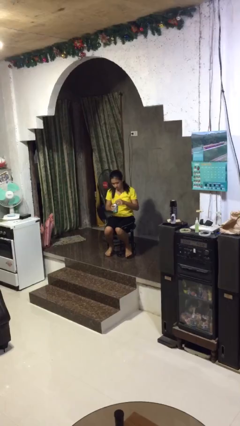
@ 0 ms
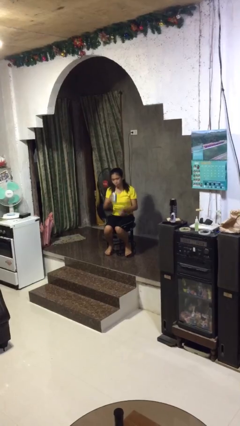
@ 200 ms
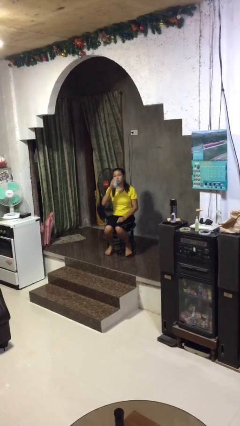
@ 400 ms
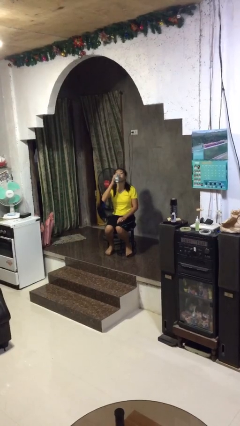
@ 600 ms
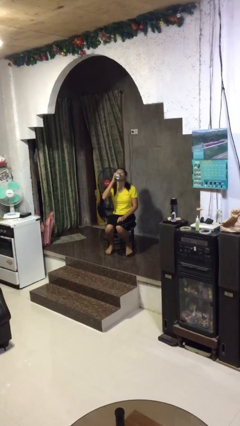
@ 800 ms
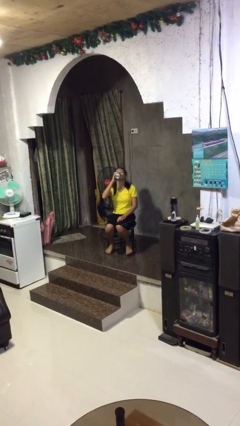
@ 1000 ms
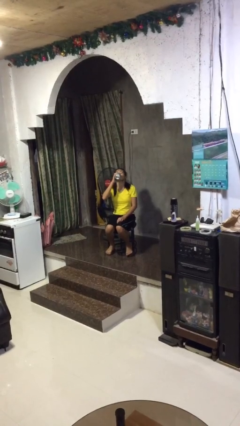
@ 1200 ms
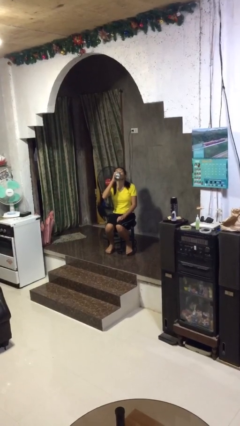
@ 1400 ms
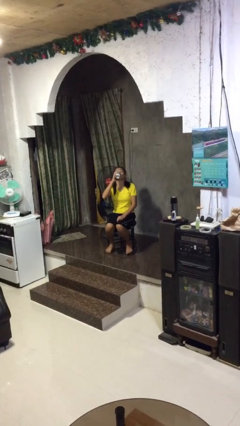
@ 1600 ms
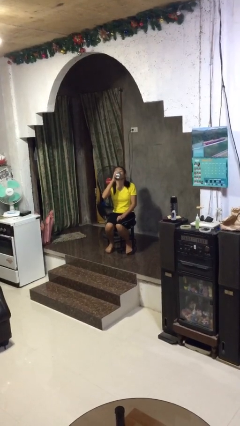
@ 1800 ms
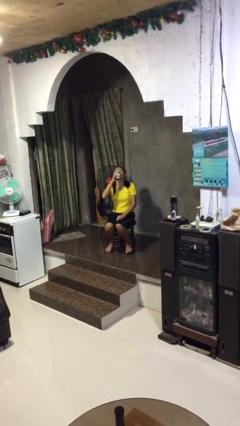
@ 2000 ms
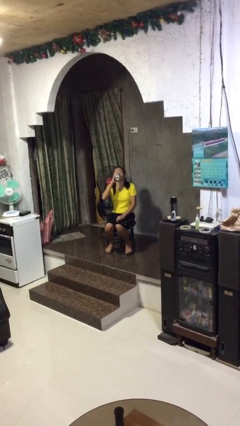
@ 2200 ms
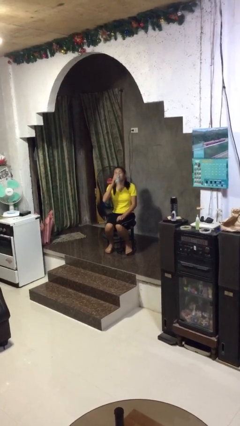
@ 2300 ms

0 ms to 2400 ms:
person drinks from beverage can

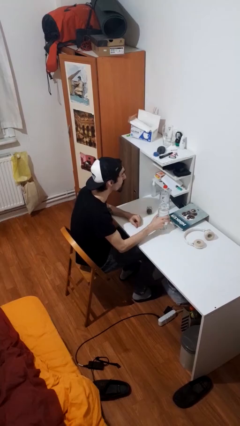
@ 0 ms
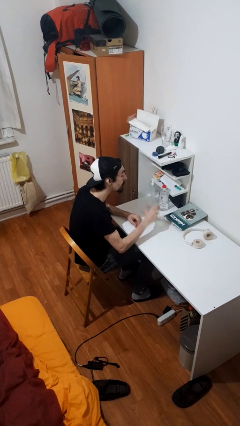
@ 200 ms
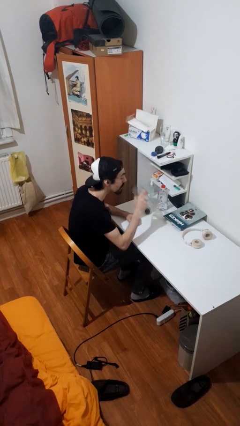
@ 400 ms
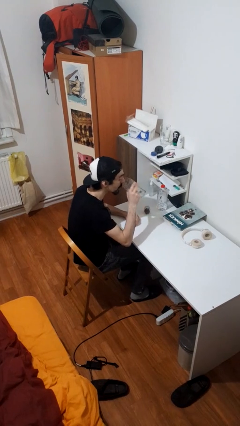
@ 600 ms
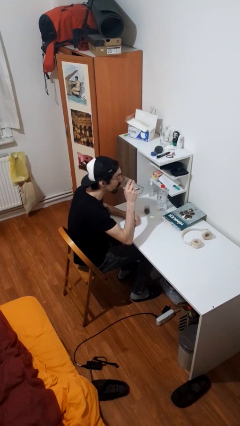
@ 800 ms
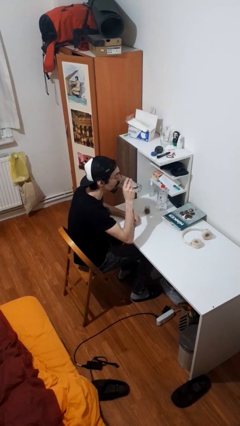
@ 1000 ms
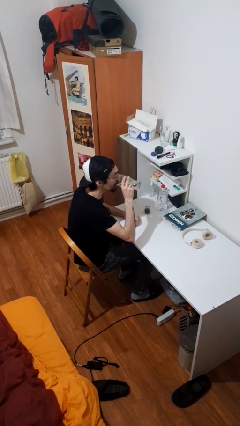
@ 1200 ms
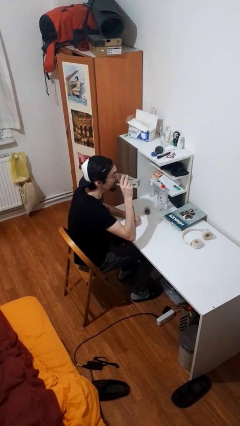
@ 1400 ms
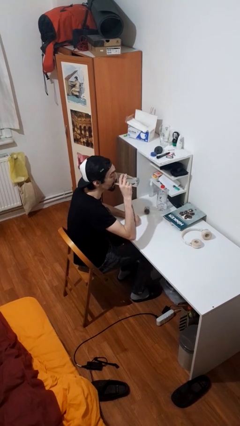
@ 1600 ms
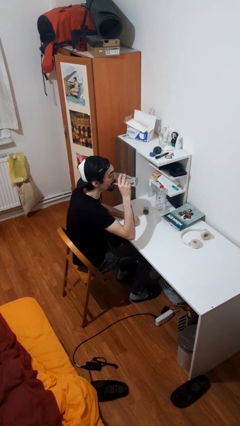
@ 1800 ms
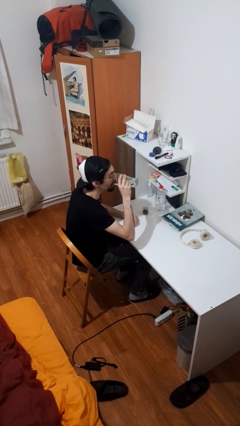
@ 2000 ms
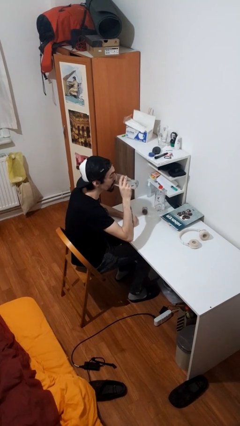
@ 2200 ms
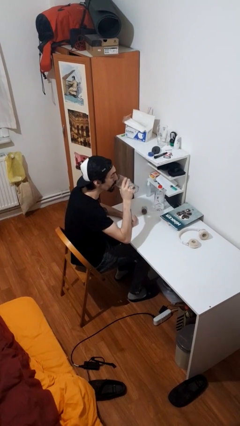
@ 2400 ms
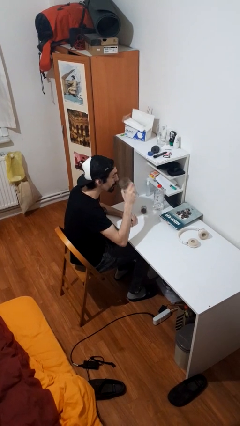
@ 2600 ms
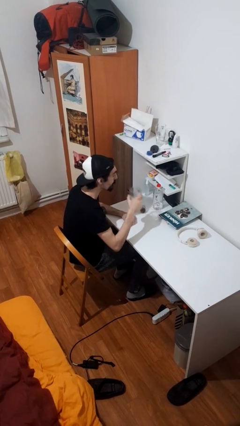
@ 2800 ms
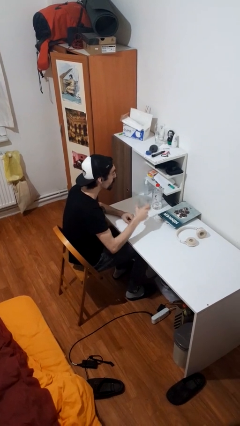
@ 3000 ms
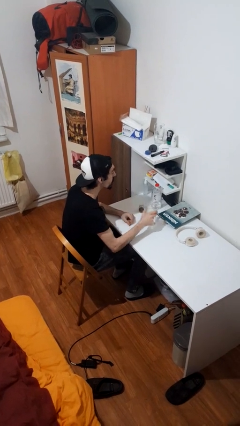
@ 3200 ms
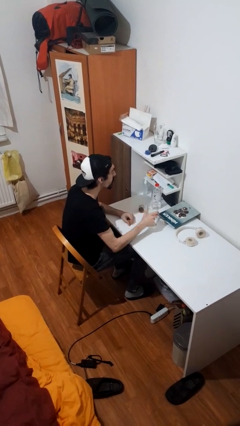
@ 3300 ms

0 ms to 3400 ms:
person drinks from cup

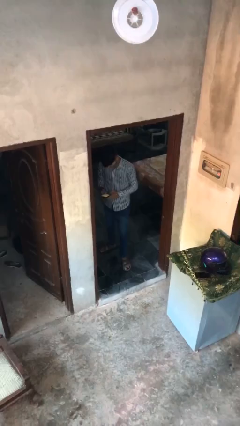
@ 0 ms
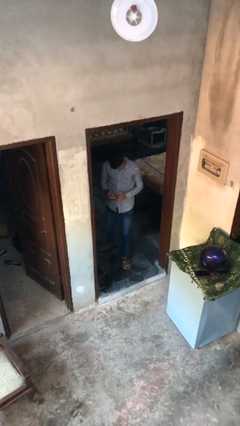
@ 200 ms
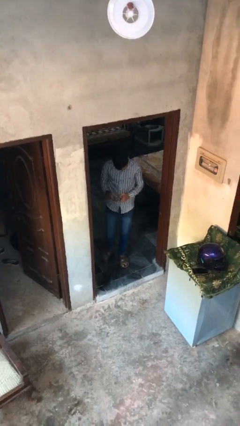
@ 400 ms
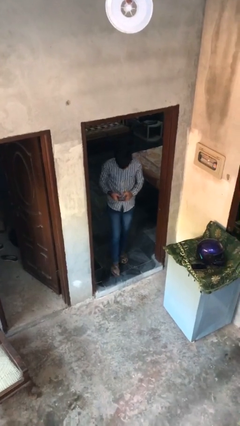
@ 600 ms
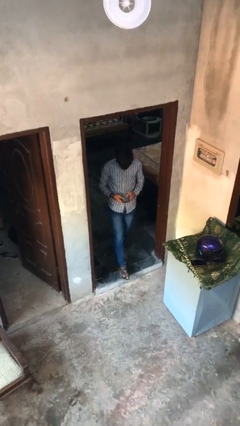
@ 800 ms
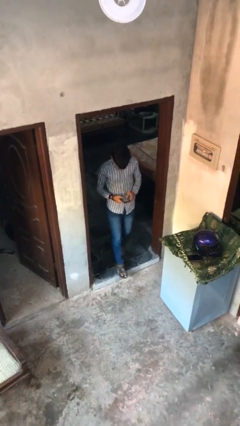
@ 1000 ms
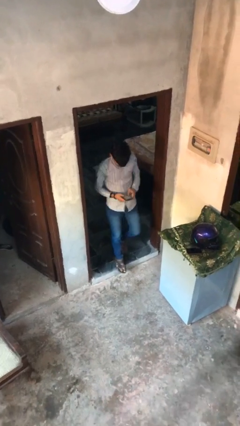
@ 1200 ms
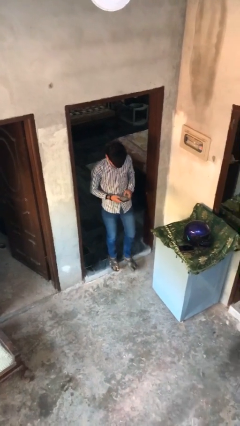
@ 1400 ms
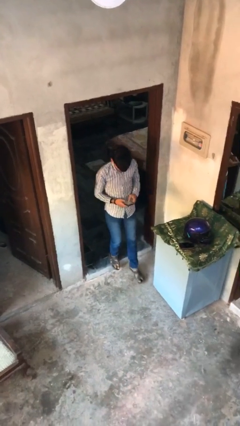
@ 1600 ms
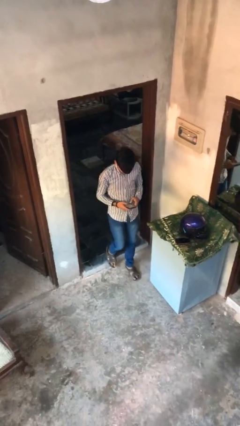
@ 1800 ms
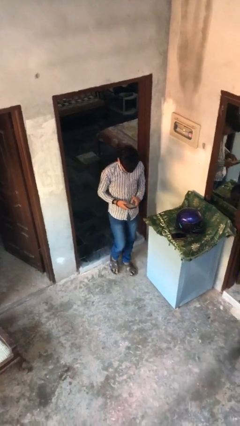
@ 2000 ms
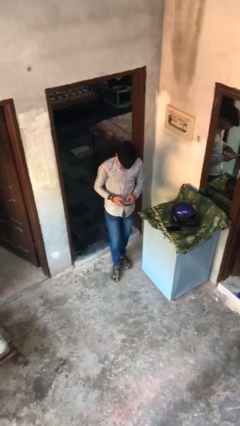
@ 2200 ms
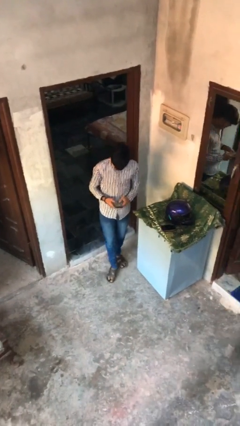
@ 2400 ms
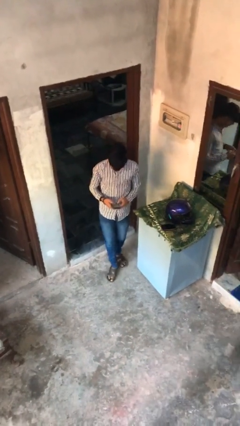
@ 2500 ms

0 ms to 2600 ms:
person exits scene through structure

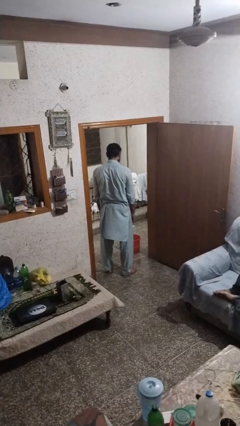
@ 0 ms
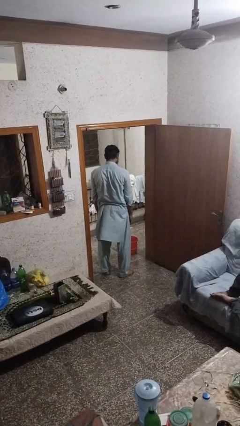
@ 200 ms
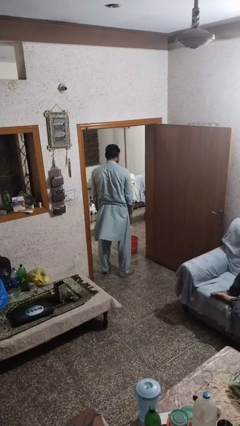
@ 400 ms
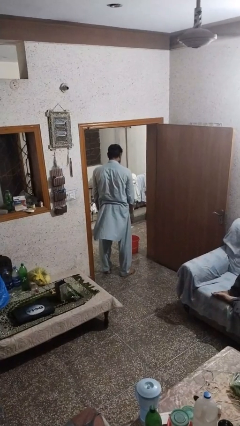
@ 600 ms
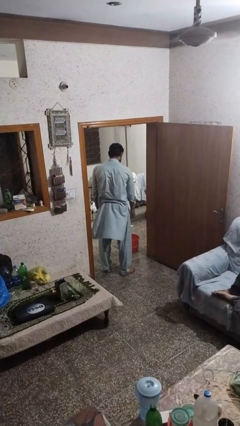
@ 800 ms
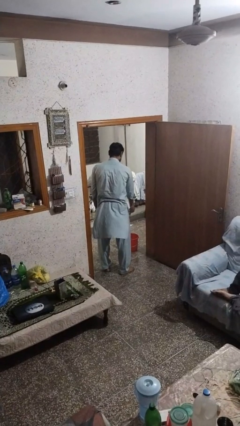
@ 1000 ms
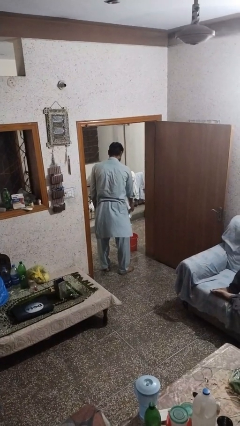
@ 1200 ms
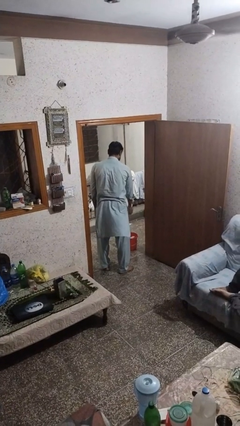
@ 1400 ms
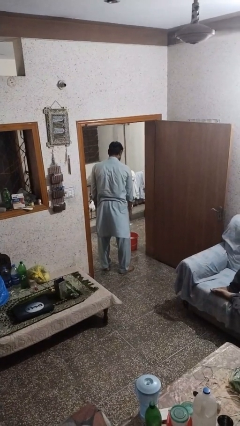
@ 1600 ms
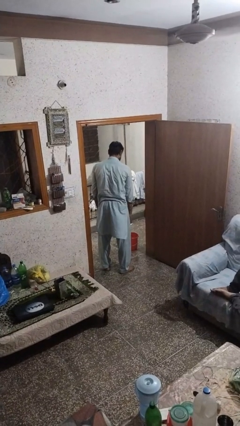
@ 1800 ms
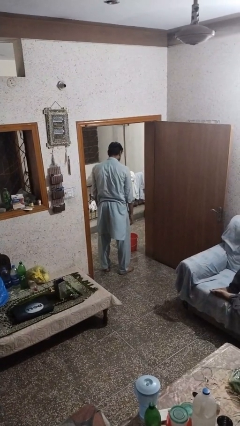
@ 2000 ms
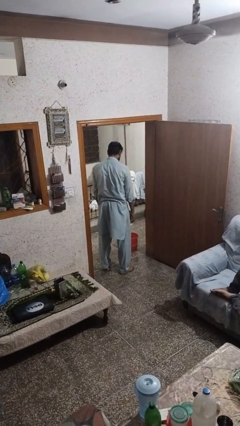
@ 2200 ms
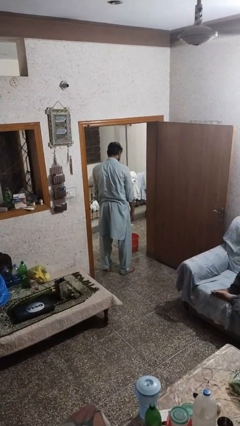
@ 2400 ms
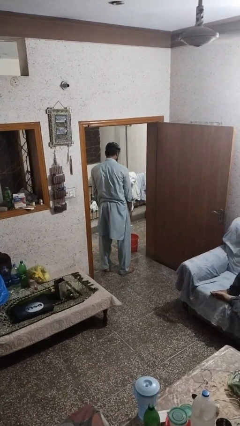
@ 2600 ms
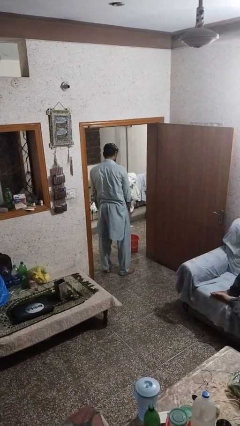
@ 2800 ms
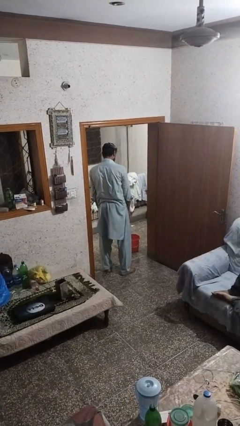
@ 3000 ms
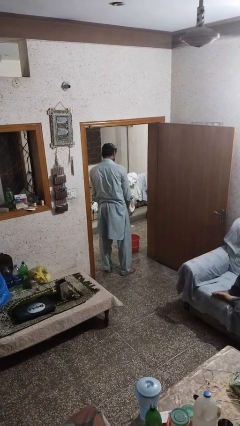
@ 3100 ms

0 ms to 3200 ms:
person discards trash

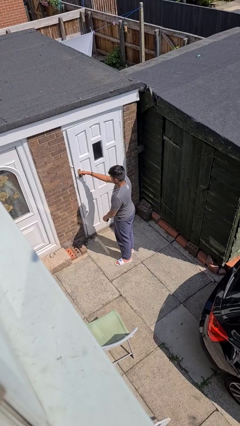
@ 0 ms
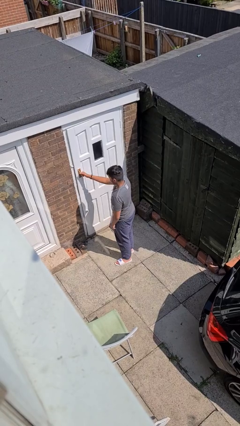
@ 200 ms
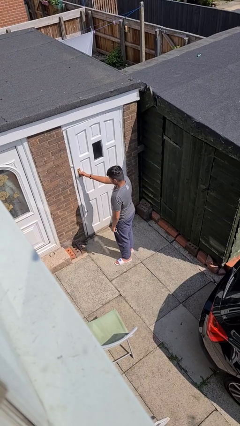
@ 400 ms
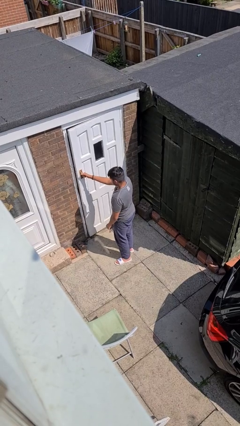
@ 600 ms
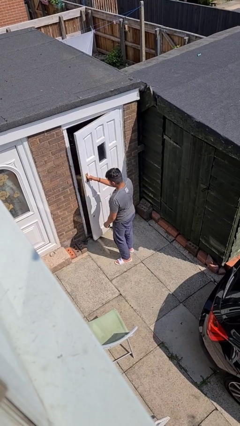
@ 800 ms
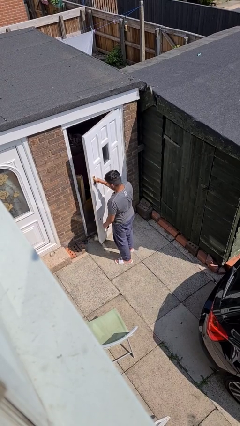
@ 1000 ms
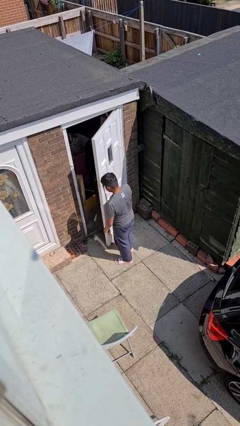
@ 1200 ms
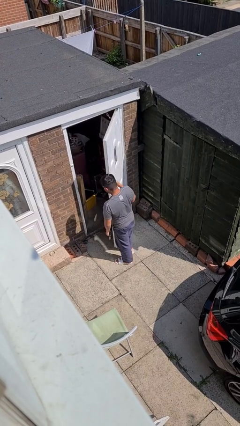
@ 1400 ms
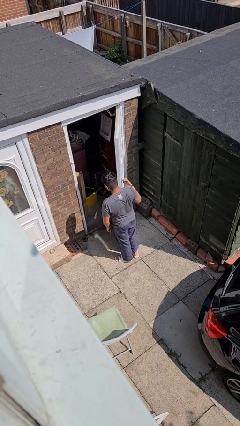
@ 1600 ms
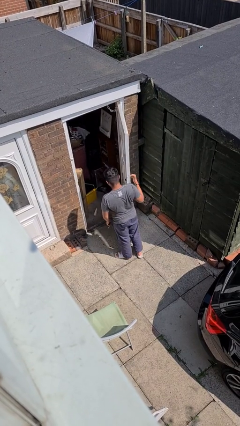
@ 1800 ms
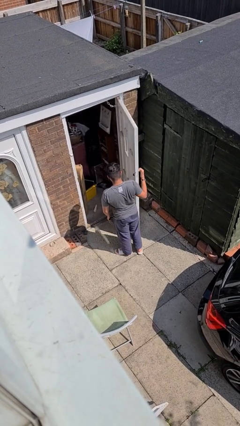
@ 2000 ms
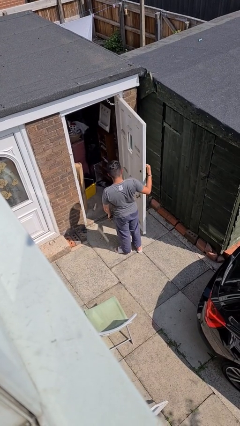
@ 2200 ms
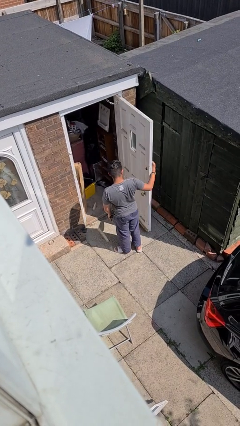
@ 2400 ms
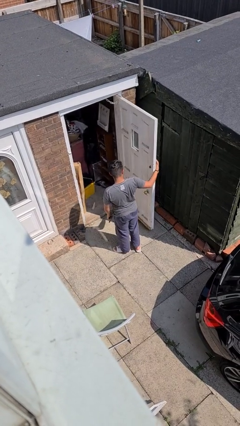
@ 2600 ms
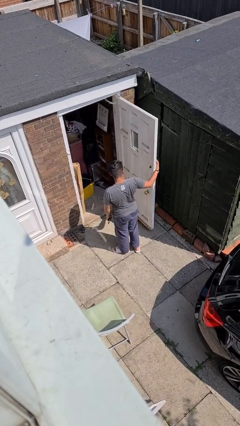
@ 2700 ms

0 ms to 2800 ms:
person opens facility door

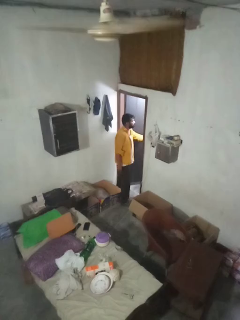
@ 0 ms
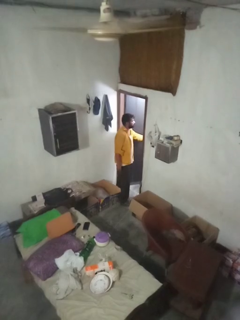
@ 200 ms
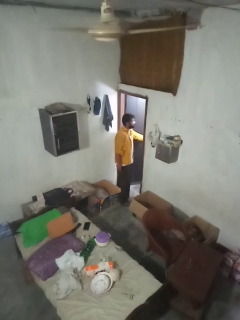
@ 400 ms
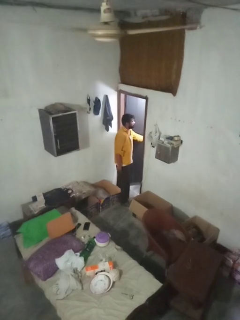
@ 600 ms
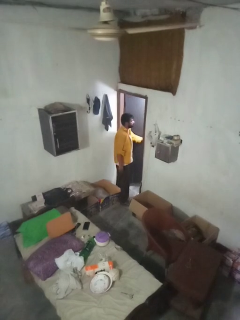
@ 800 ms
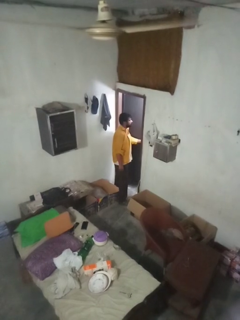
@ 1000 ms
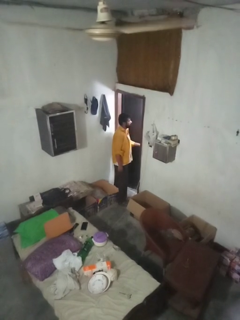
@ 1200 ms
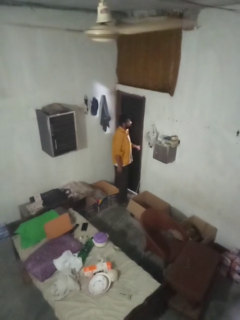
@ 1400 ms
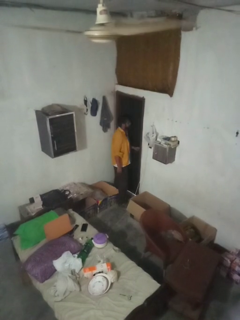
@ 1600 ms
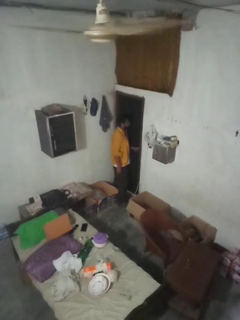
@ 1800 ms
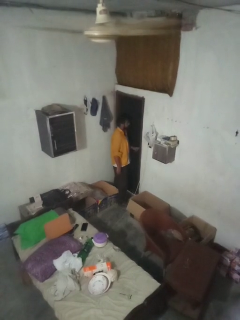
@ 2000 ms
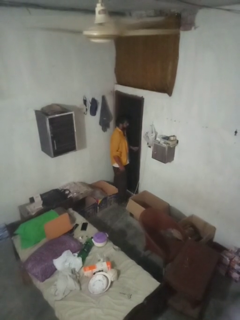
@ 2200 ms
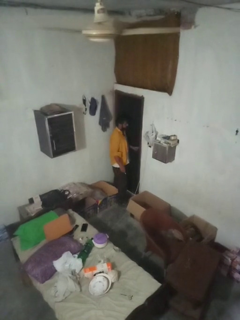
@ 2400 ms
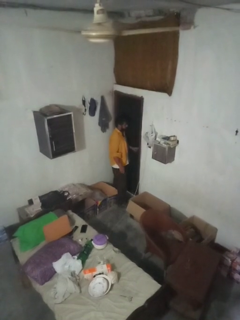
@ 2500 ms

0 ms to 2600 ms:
person closes facility door

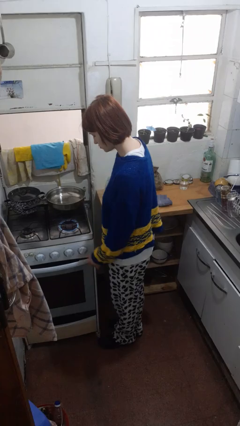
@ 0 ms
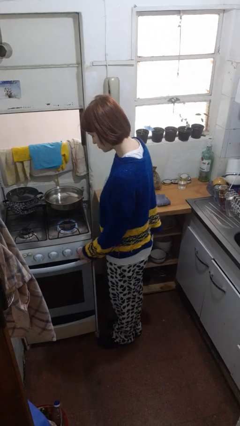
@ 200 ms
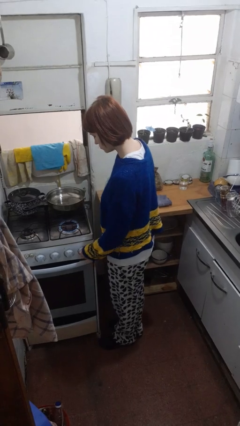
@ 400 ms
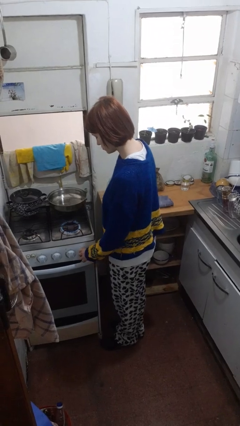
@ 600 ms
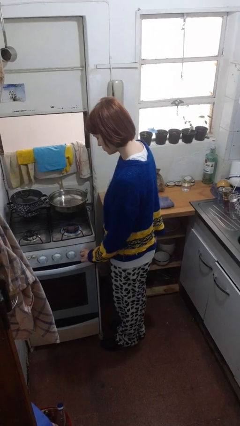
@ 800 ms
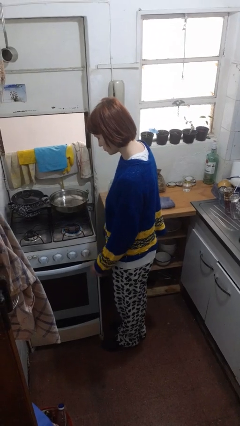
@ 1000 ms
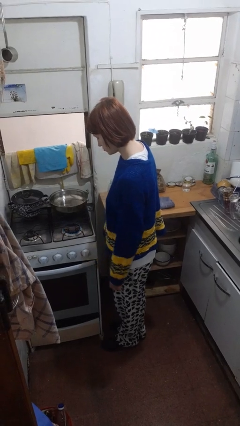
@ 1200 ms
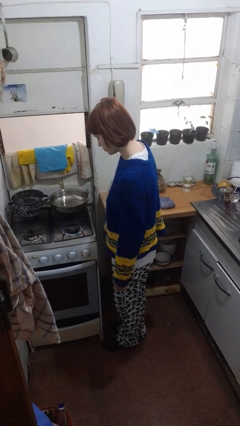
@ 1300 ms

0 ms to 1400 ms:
person turns off stovetop
